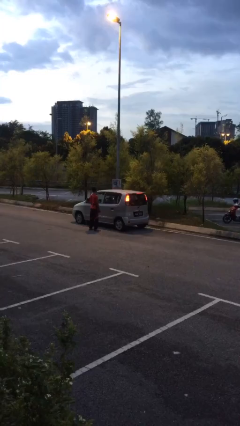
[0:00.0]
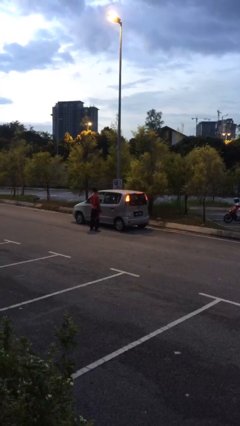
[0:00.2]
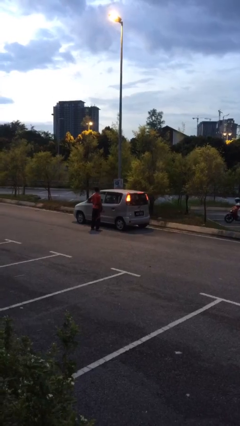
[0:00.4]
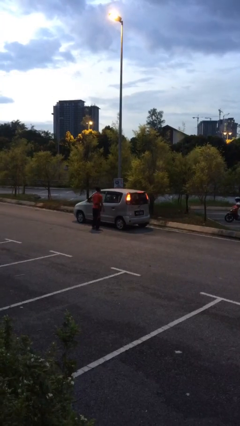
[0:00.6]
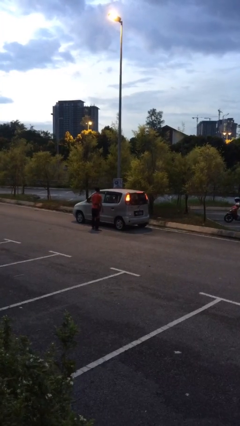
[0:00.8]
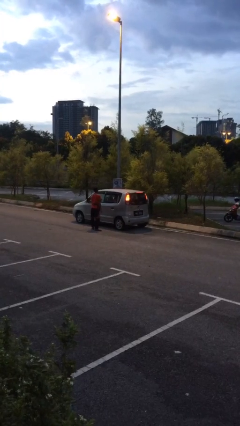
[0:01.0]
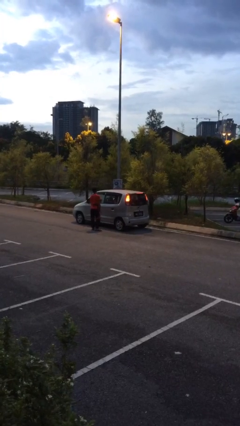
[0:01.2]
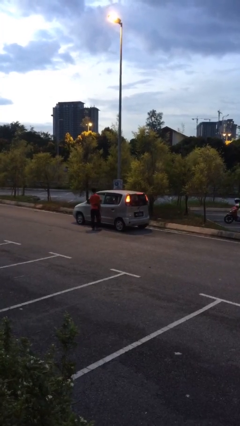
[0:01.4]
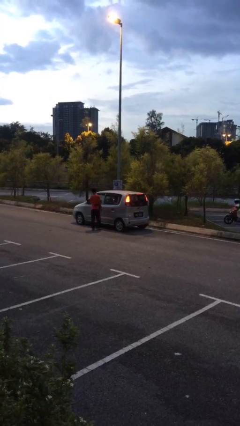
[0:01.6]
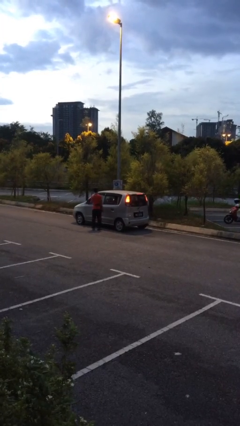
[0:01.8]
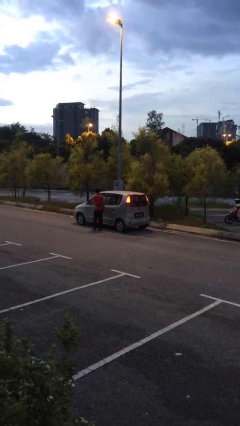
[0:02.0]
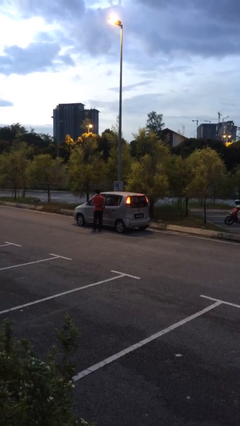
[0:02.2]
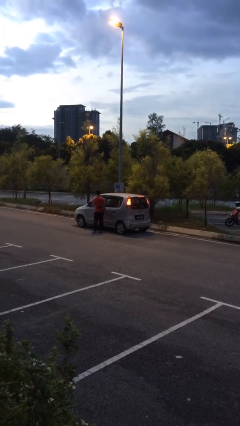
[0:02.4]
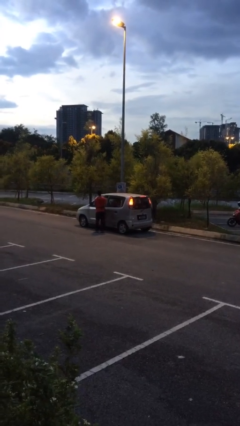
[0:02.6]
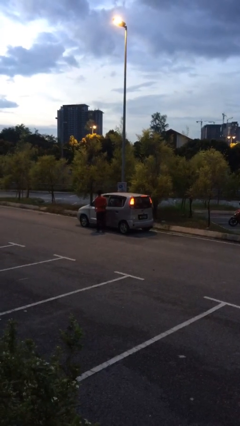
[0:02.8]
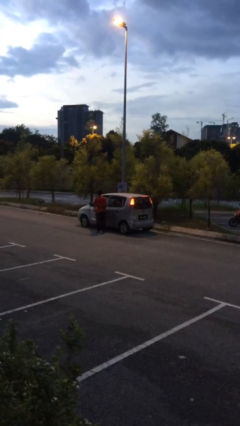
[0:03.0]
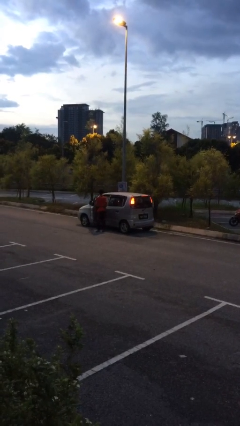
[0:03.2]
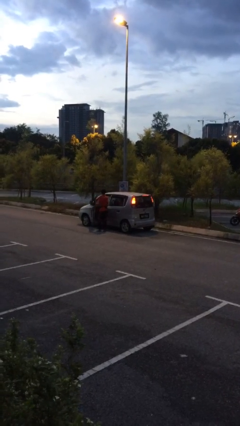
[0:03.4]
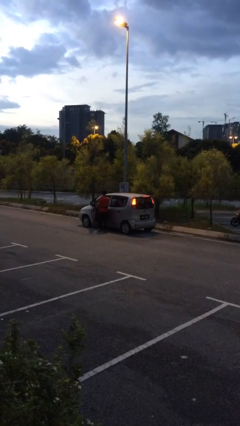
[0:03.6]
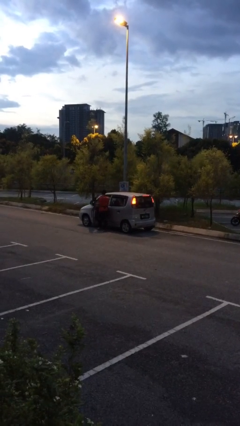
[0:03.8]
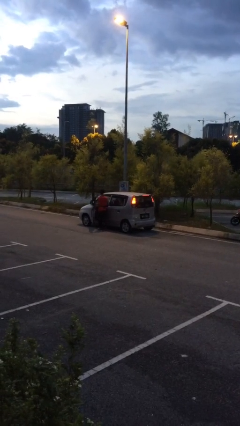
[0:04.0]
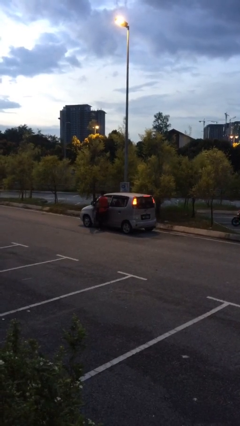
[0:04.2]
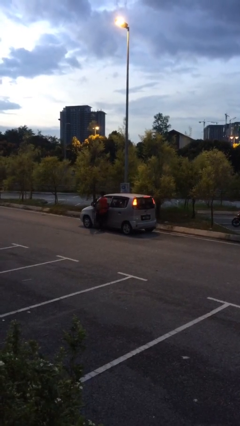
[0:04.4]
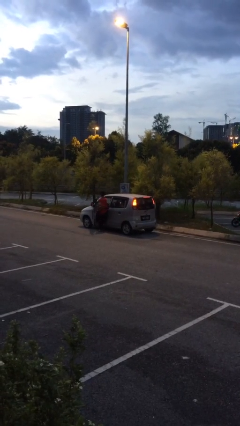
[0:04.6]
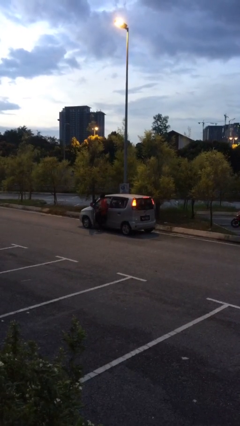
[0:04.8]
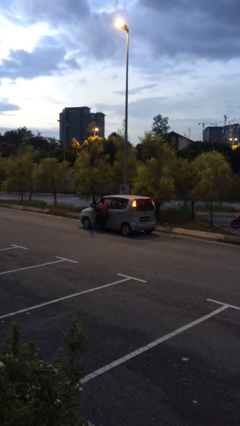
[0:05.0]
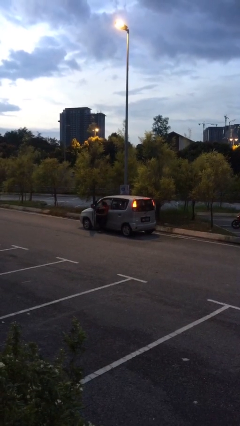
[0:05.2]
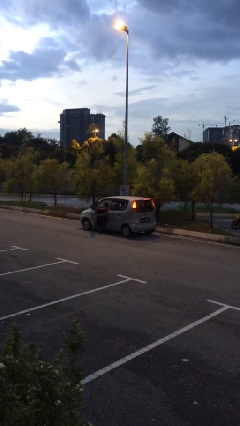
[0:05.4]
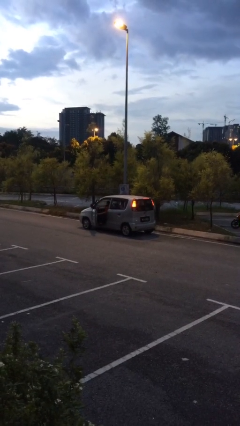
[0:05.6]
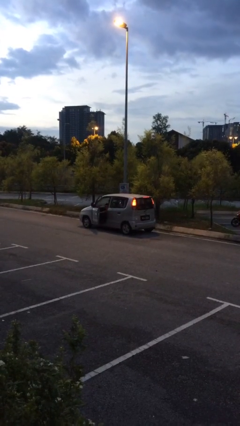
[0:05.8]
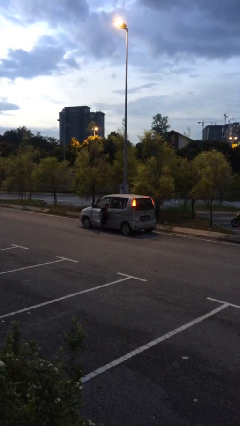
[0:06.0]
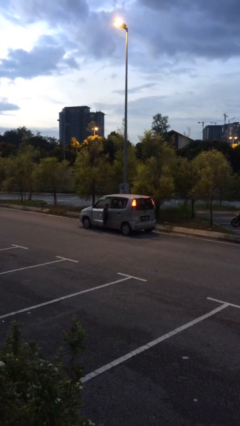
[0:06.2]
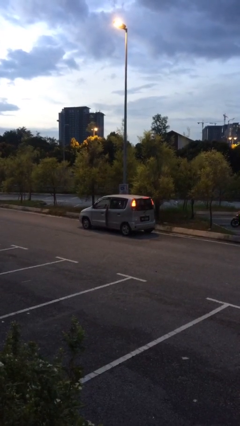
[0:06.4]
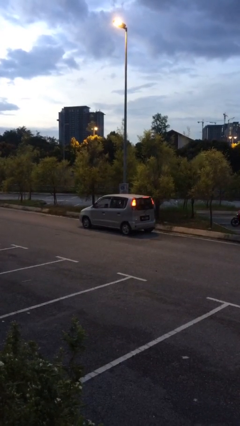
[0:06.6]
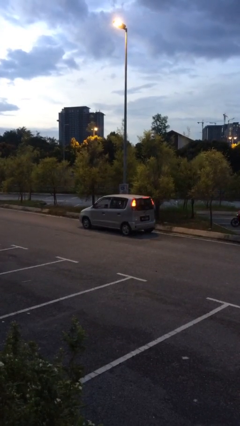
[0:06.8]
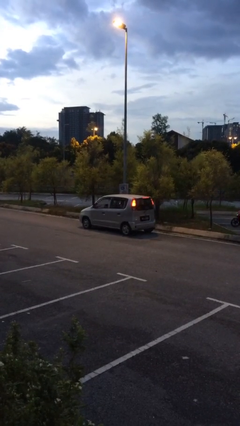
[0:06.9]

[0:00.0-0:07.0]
car picks up person

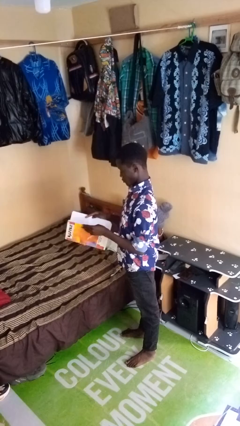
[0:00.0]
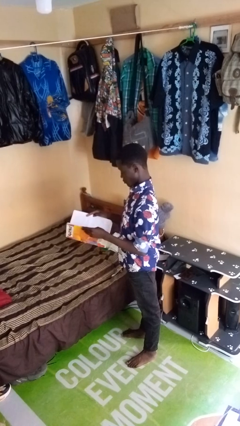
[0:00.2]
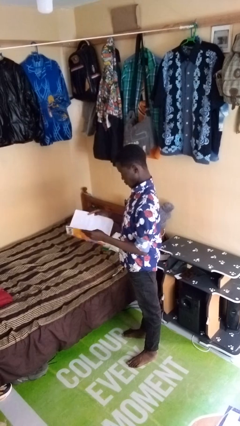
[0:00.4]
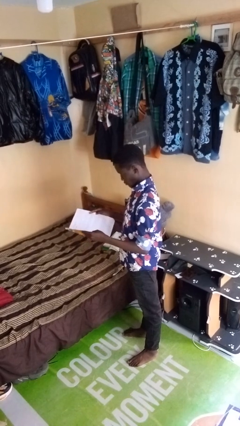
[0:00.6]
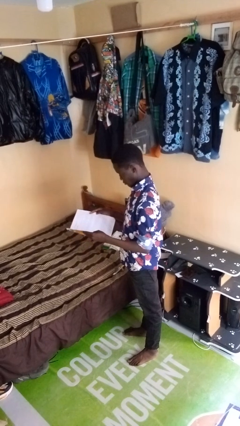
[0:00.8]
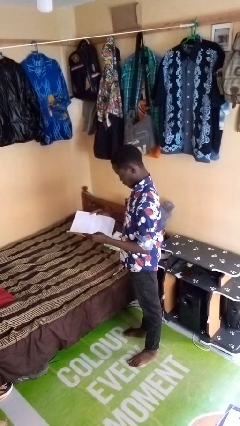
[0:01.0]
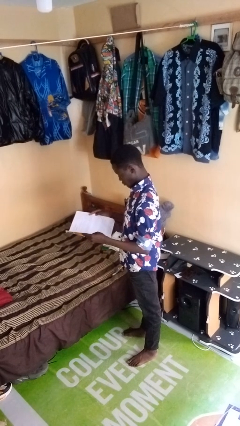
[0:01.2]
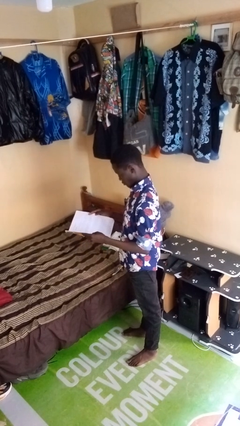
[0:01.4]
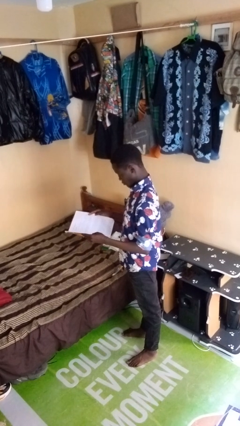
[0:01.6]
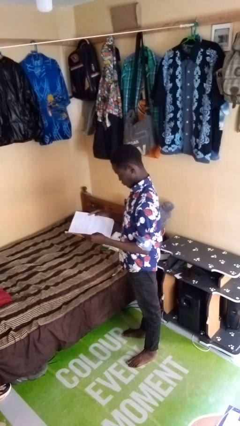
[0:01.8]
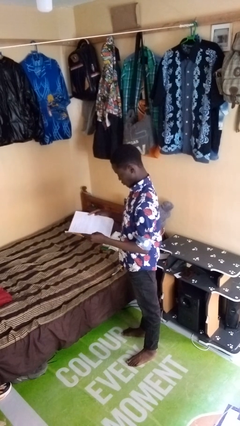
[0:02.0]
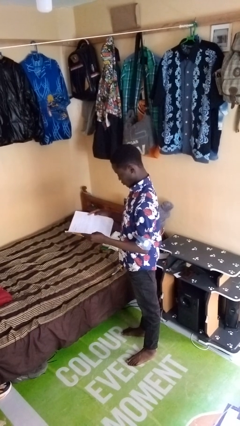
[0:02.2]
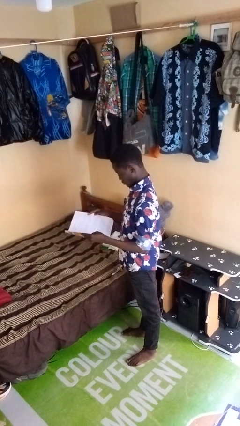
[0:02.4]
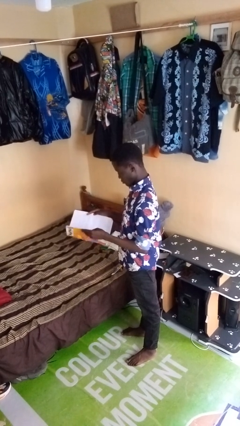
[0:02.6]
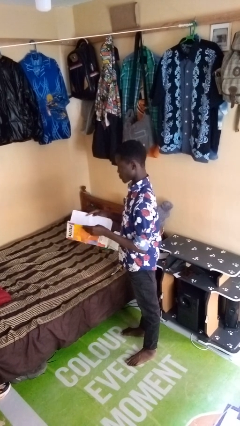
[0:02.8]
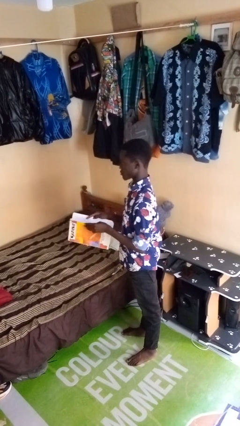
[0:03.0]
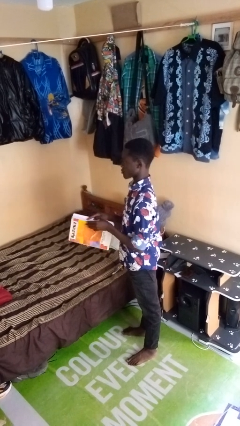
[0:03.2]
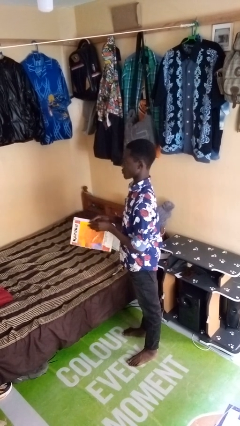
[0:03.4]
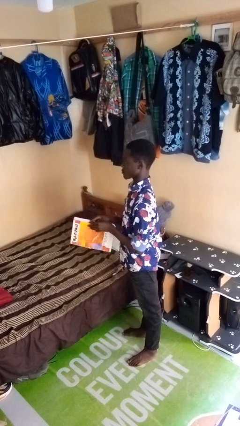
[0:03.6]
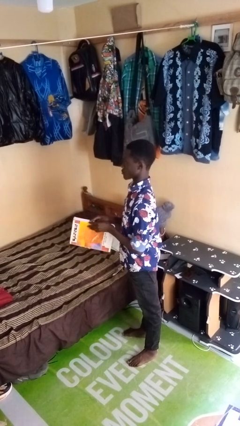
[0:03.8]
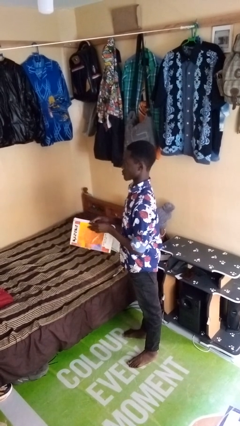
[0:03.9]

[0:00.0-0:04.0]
person reads newspaper

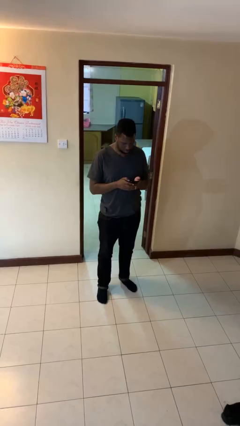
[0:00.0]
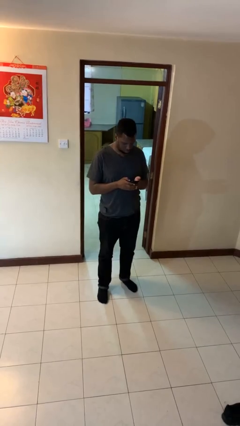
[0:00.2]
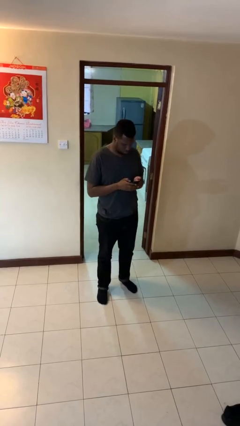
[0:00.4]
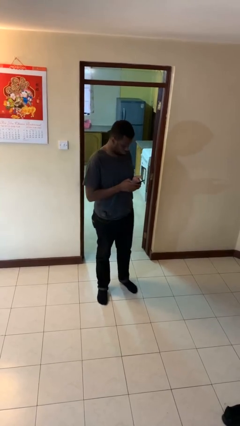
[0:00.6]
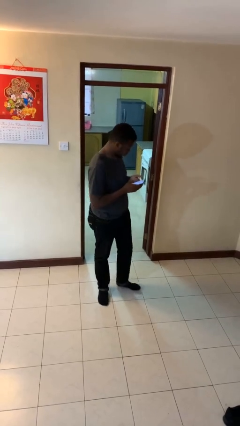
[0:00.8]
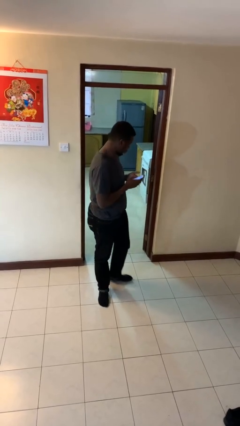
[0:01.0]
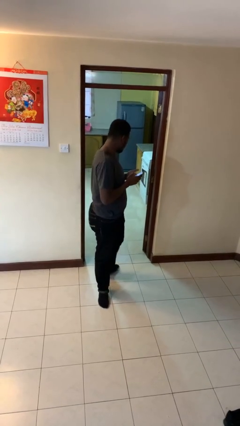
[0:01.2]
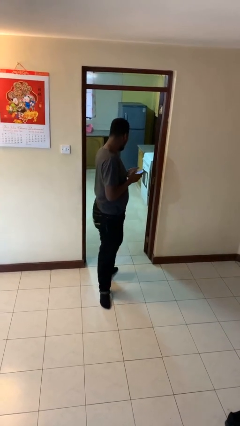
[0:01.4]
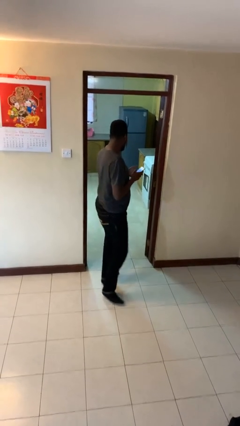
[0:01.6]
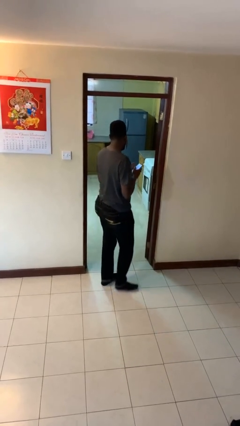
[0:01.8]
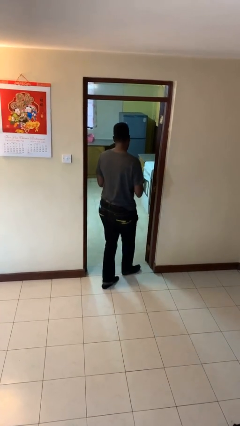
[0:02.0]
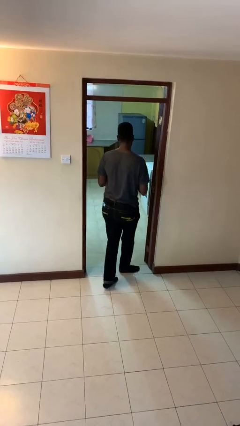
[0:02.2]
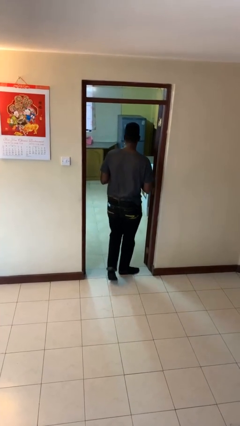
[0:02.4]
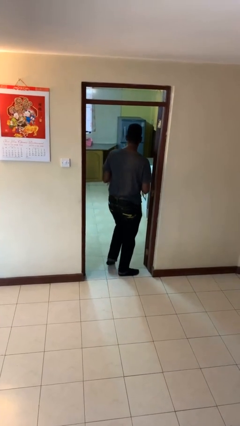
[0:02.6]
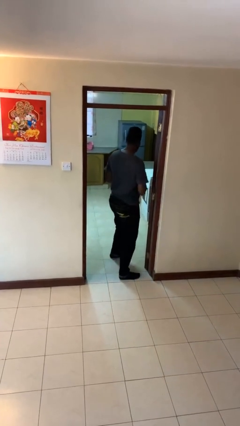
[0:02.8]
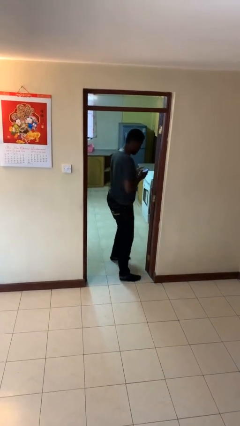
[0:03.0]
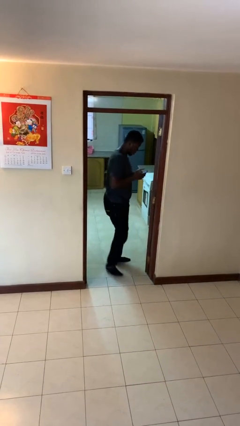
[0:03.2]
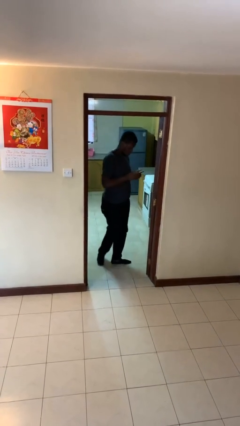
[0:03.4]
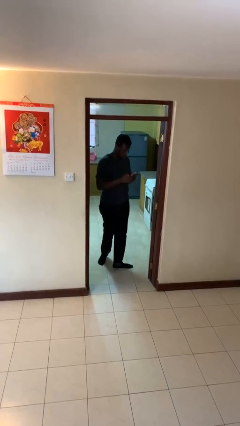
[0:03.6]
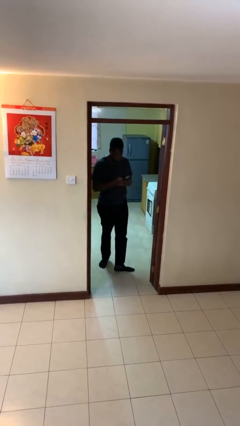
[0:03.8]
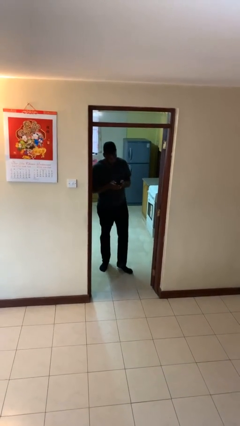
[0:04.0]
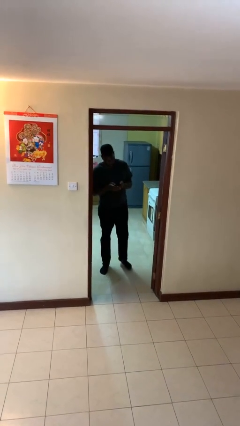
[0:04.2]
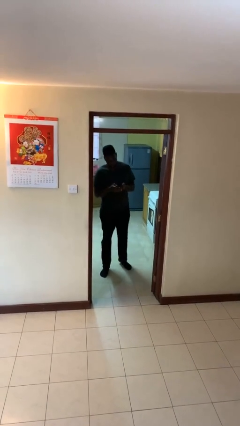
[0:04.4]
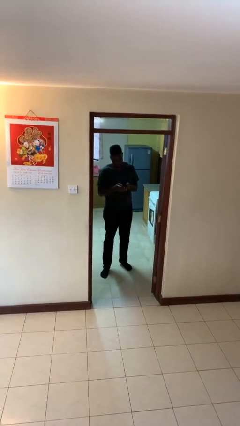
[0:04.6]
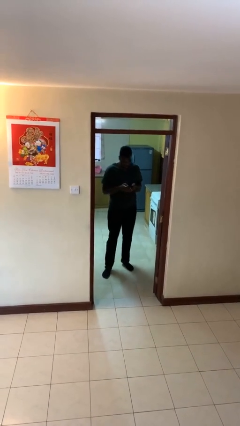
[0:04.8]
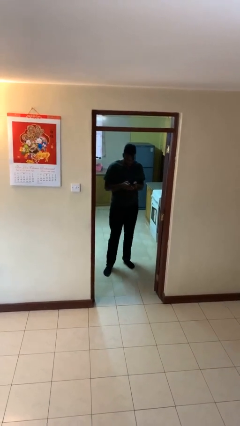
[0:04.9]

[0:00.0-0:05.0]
person exits scene through structure

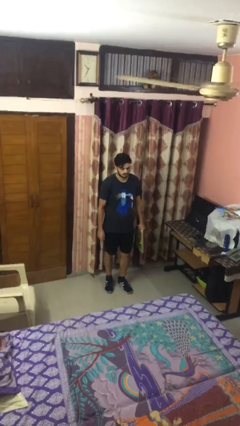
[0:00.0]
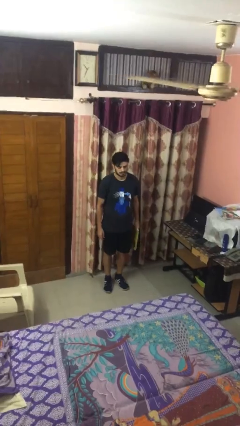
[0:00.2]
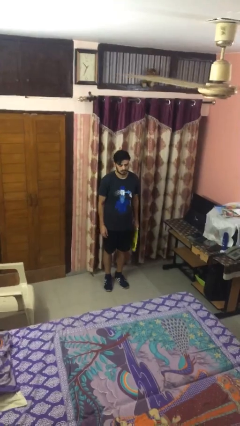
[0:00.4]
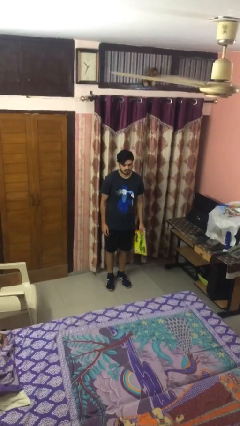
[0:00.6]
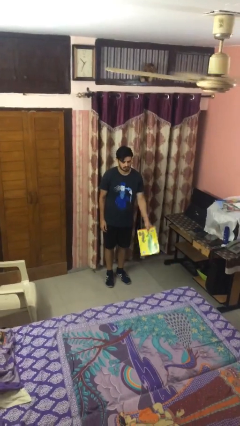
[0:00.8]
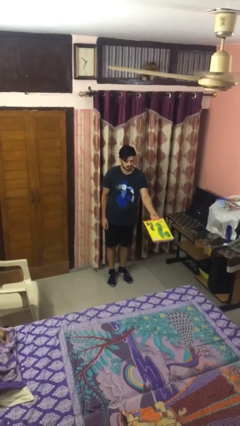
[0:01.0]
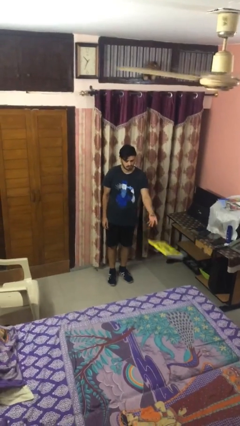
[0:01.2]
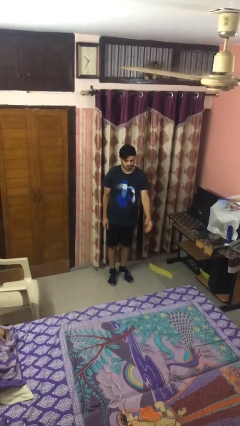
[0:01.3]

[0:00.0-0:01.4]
person throws object on bed

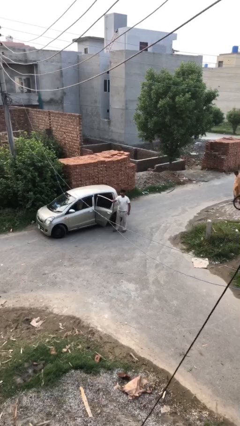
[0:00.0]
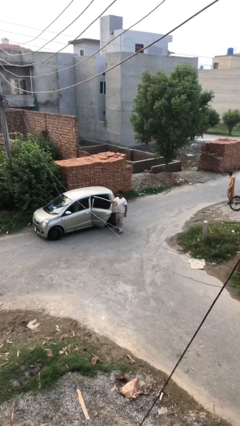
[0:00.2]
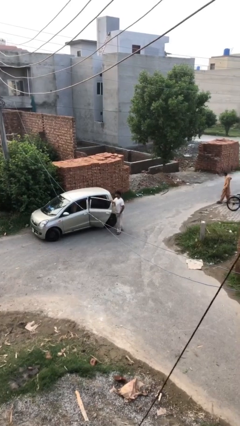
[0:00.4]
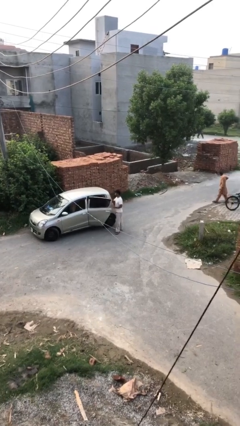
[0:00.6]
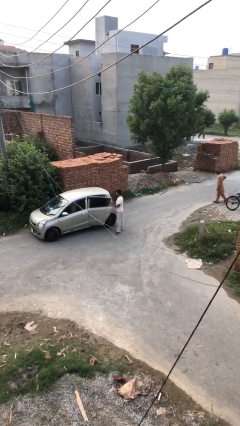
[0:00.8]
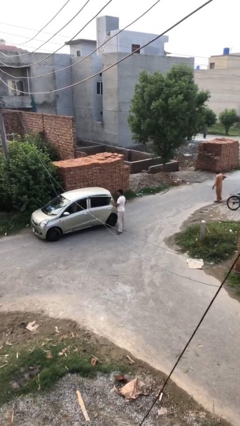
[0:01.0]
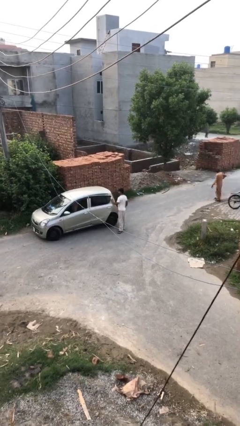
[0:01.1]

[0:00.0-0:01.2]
person closes car door
